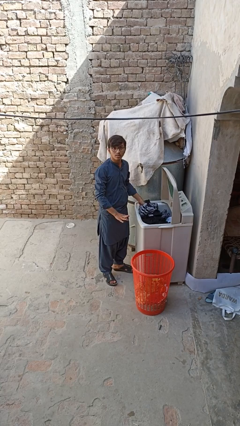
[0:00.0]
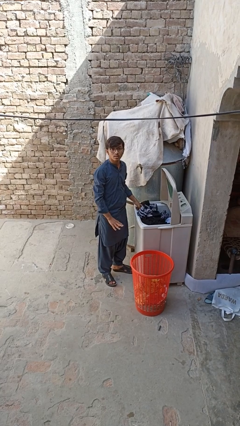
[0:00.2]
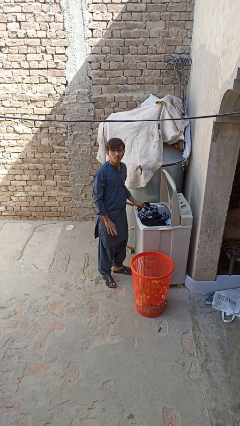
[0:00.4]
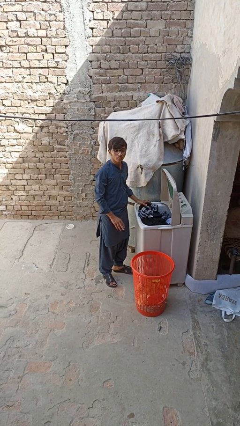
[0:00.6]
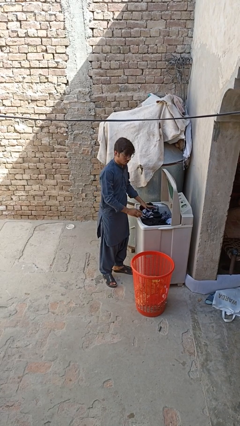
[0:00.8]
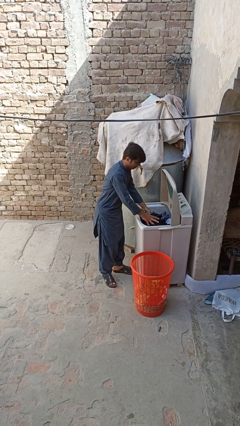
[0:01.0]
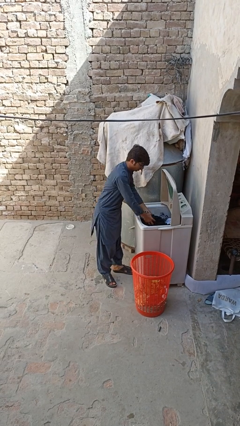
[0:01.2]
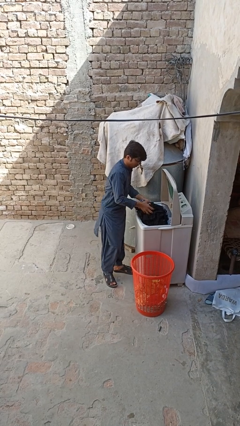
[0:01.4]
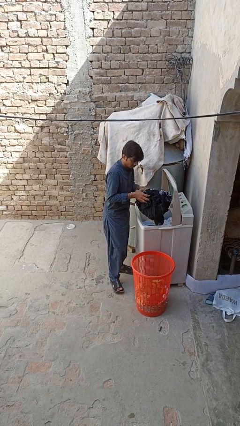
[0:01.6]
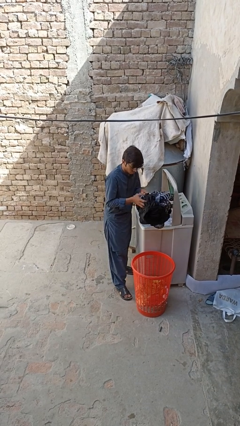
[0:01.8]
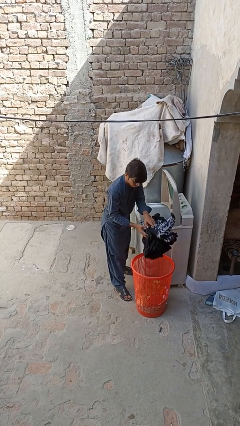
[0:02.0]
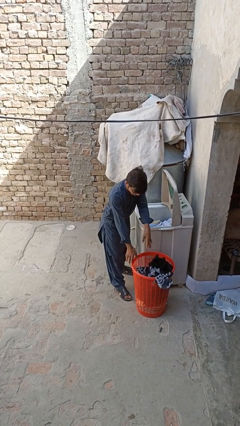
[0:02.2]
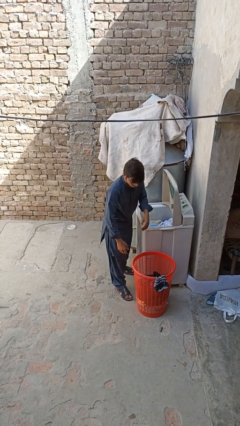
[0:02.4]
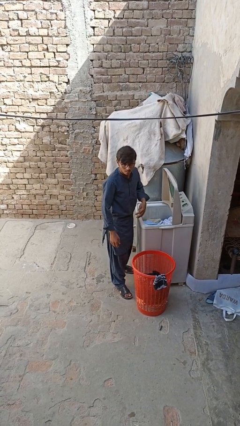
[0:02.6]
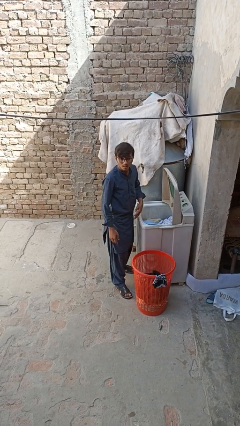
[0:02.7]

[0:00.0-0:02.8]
person unloads clotheswasher

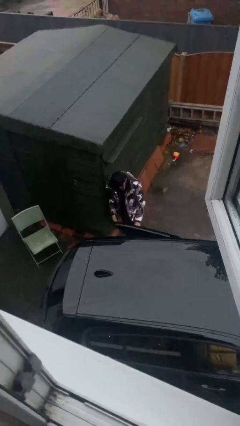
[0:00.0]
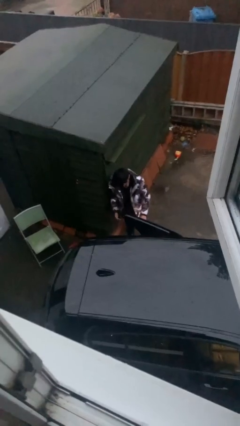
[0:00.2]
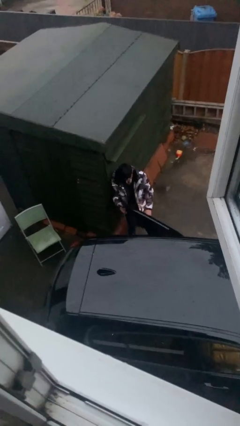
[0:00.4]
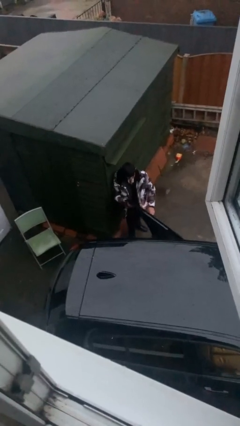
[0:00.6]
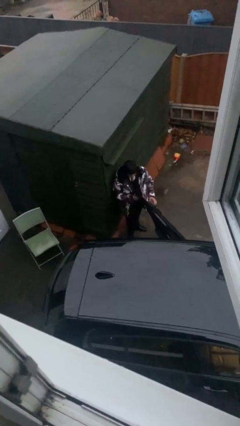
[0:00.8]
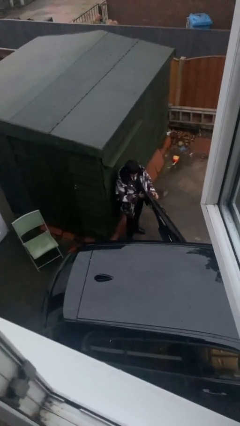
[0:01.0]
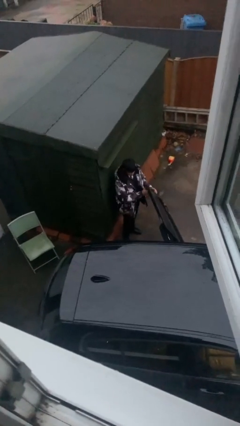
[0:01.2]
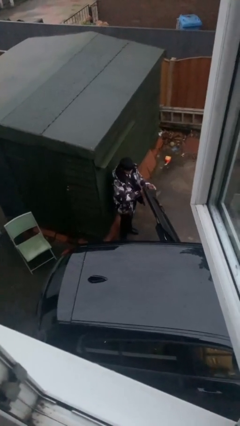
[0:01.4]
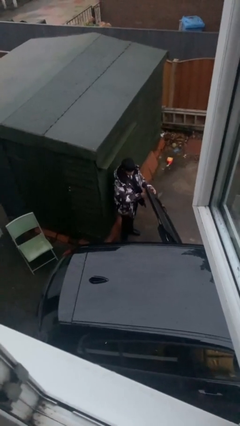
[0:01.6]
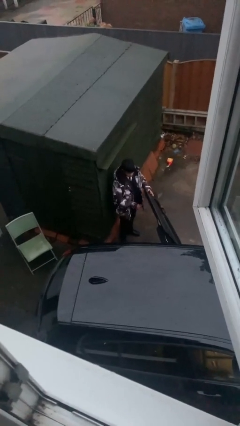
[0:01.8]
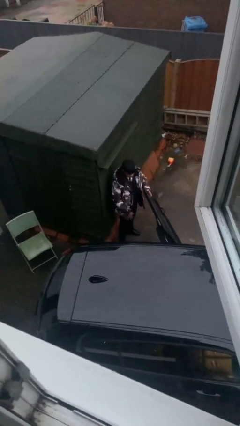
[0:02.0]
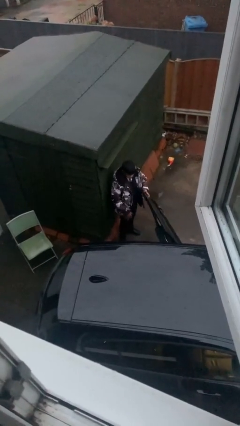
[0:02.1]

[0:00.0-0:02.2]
person opens car door

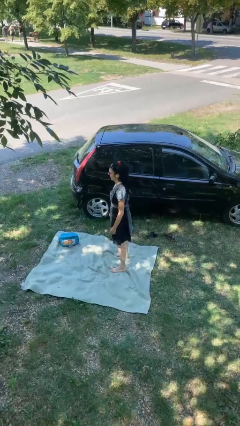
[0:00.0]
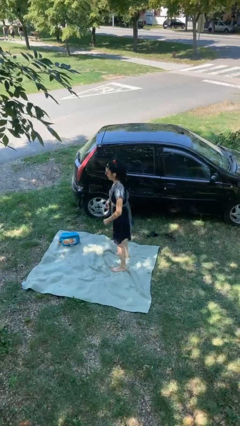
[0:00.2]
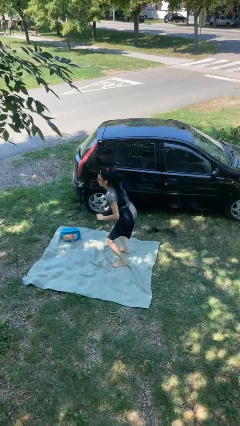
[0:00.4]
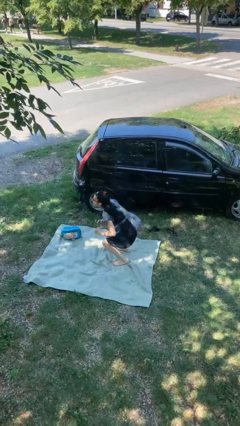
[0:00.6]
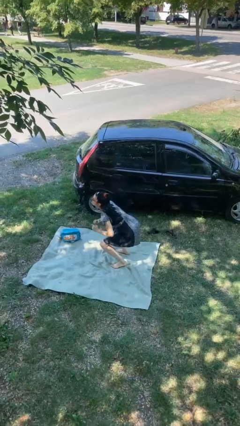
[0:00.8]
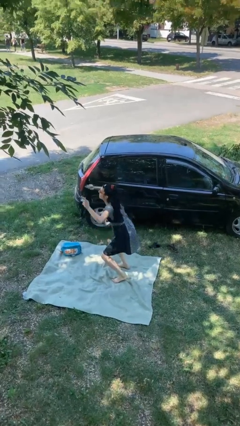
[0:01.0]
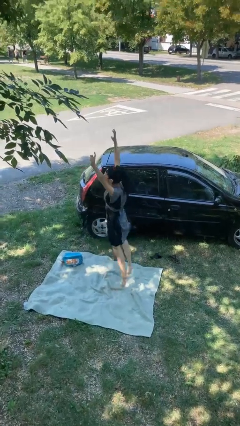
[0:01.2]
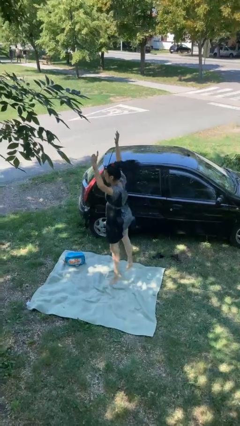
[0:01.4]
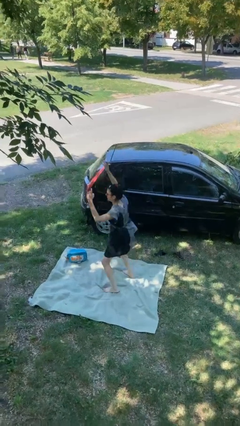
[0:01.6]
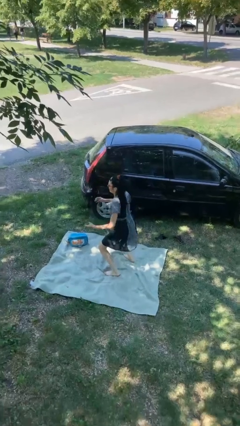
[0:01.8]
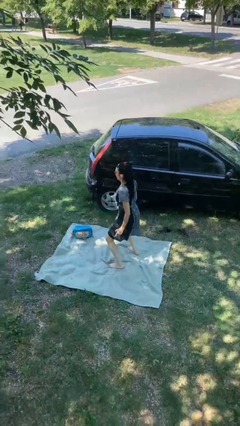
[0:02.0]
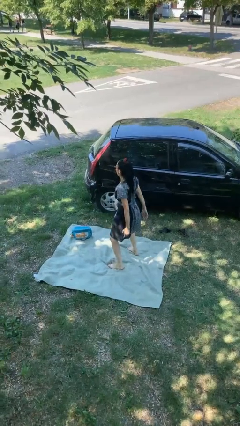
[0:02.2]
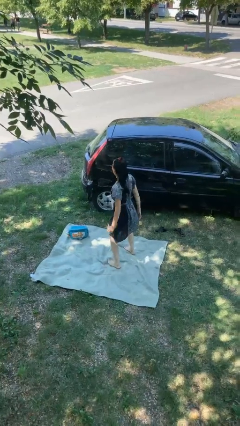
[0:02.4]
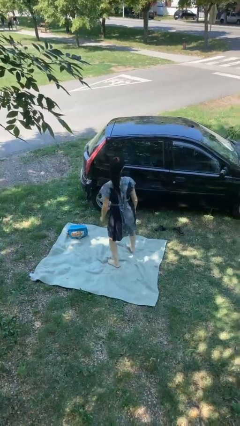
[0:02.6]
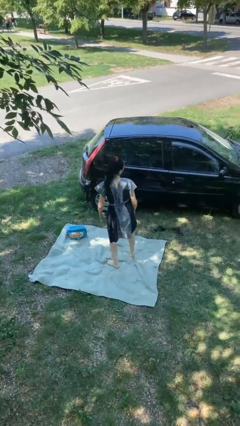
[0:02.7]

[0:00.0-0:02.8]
person jumps

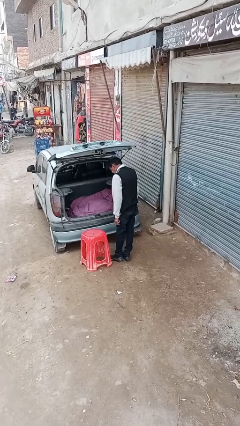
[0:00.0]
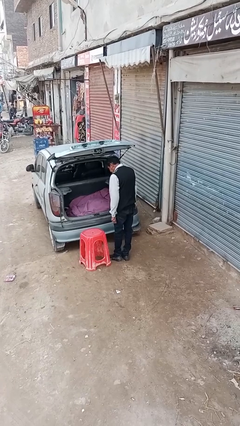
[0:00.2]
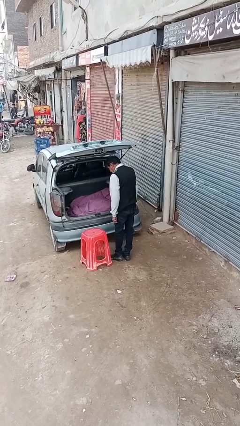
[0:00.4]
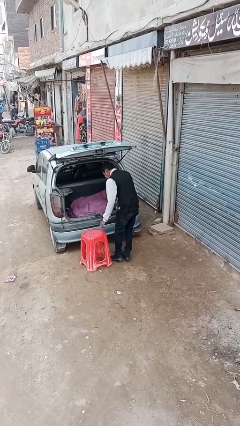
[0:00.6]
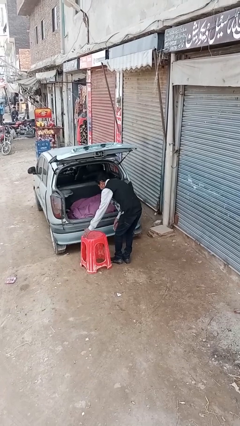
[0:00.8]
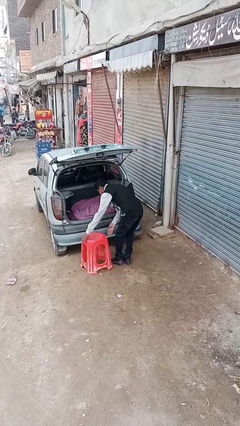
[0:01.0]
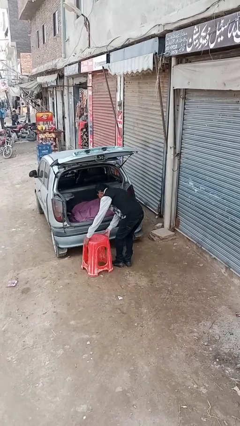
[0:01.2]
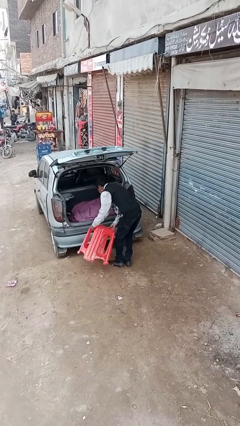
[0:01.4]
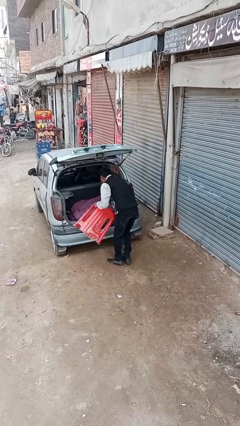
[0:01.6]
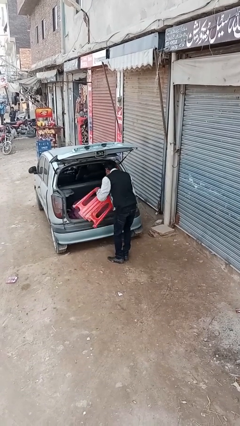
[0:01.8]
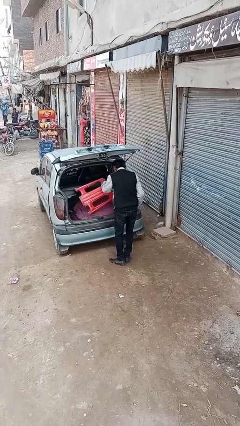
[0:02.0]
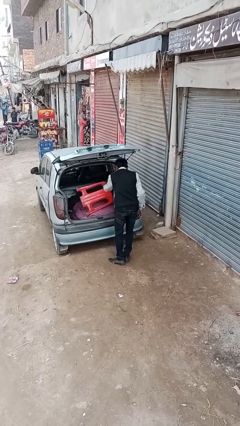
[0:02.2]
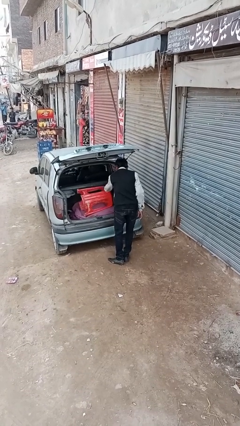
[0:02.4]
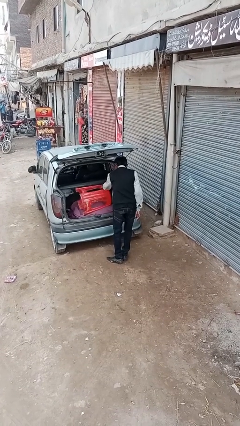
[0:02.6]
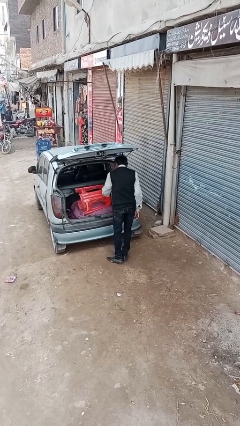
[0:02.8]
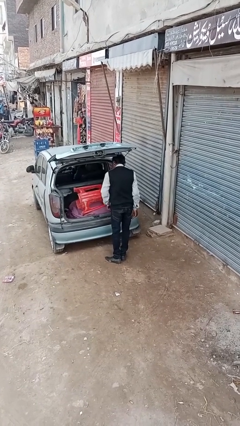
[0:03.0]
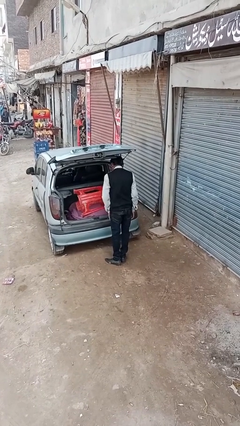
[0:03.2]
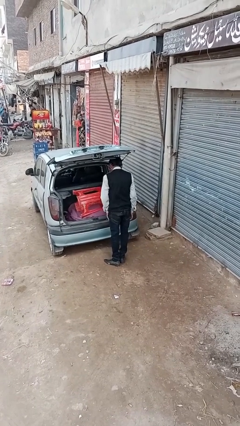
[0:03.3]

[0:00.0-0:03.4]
person loads car

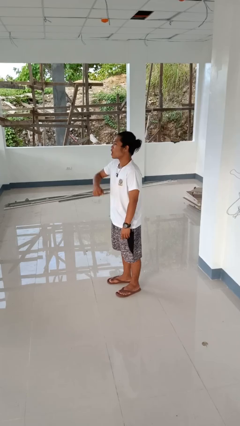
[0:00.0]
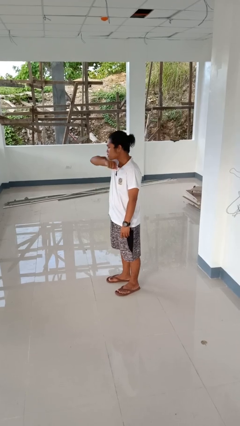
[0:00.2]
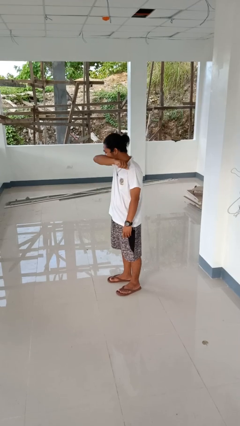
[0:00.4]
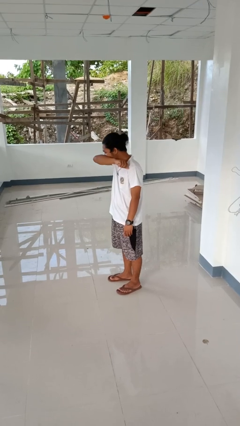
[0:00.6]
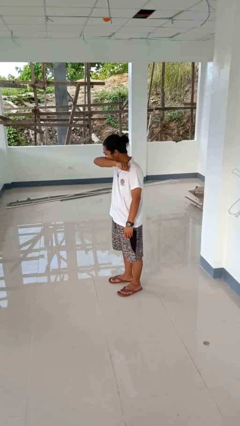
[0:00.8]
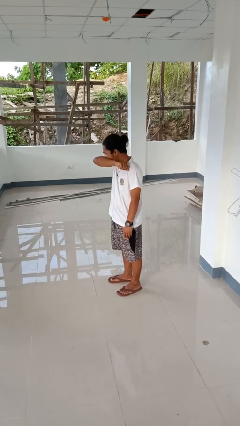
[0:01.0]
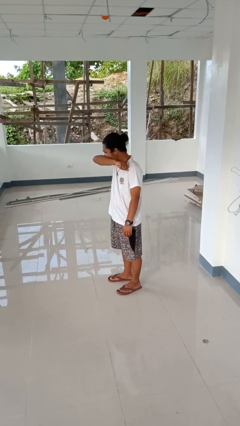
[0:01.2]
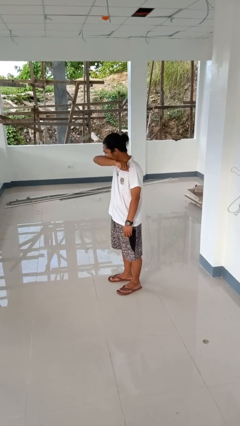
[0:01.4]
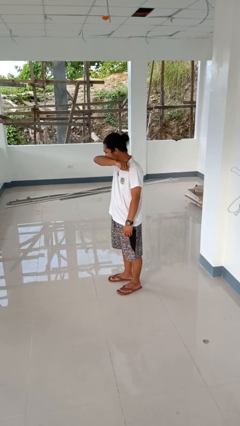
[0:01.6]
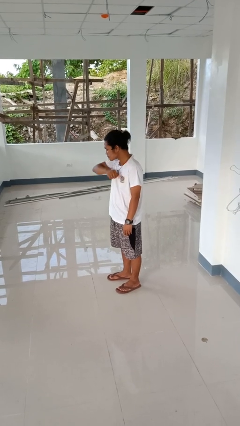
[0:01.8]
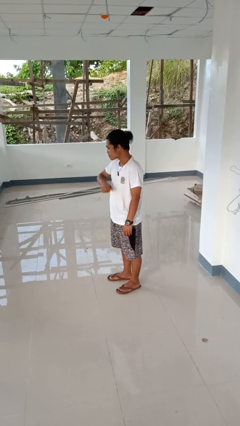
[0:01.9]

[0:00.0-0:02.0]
person sneezes into arm

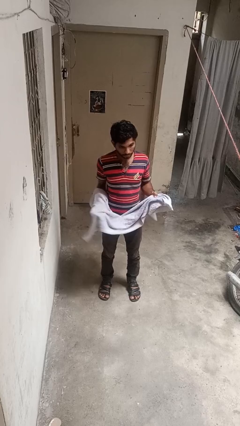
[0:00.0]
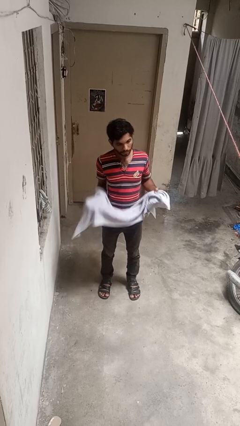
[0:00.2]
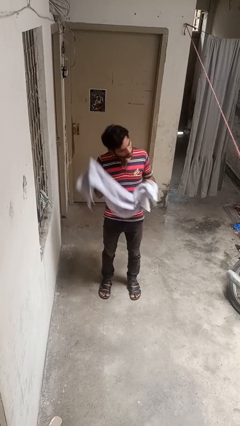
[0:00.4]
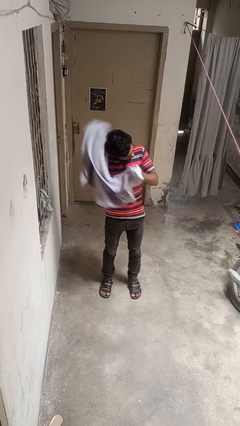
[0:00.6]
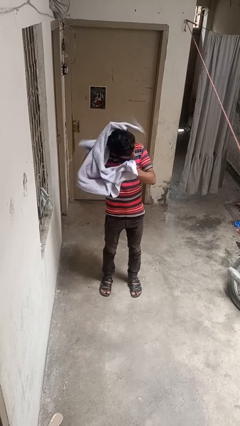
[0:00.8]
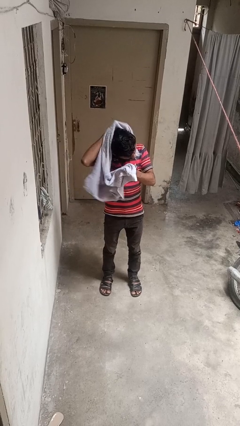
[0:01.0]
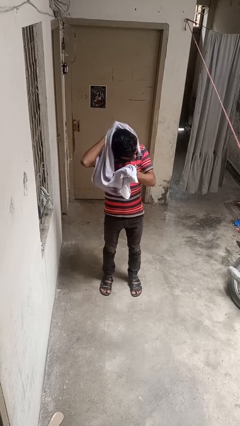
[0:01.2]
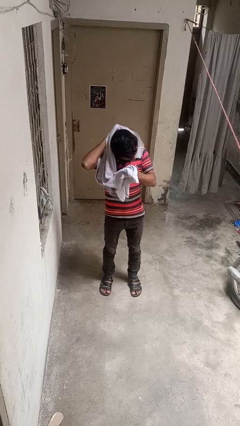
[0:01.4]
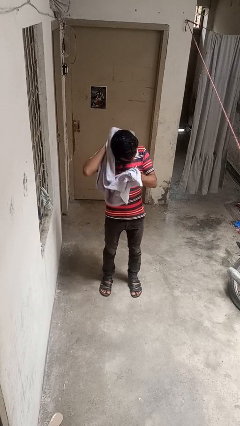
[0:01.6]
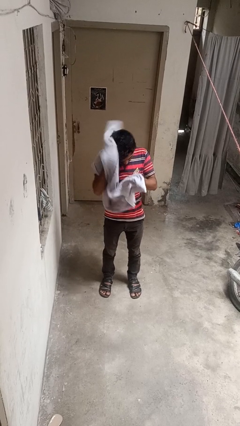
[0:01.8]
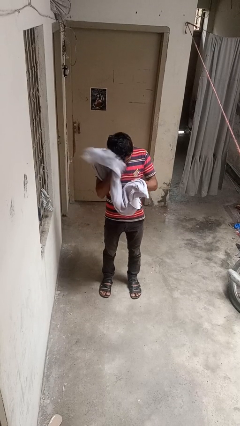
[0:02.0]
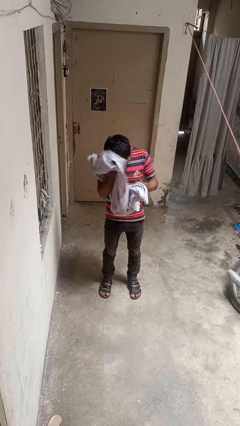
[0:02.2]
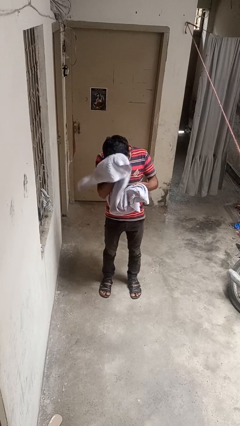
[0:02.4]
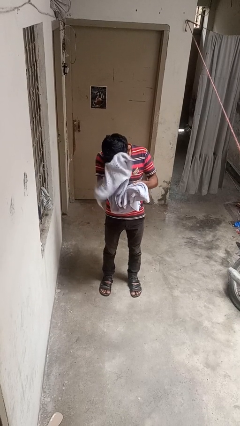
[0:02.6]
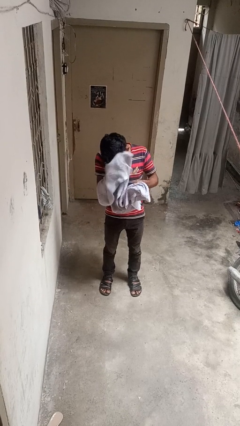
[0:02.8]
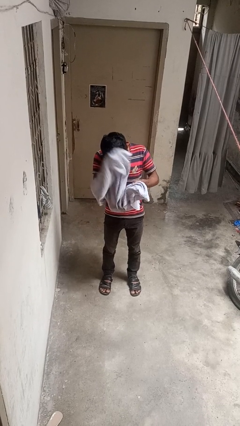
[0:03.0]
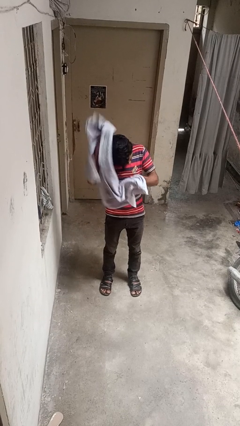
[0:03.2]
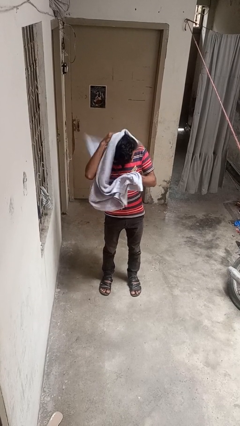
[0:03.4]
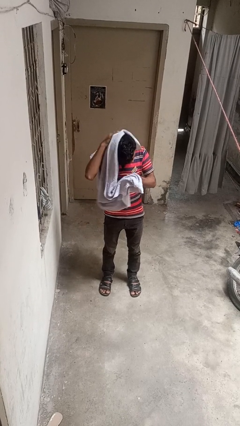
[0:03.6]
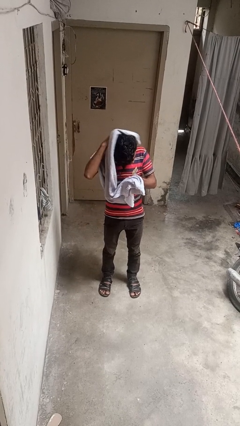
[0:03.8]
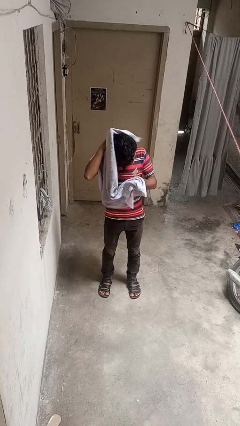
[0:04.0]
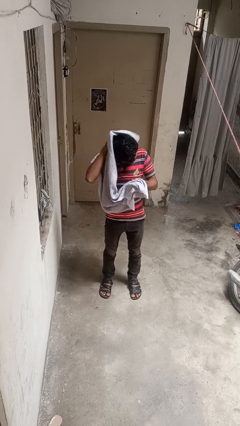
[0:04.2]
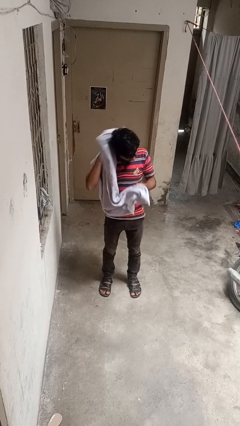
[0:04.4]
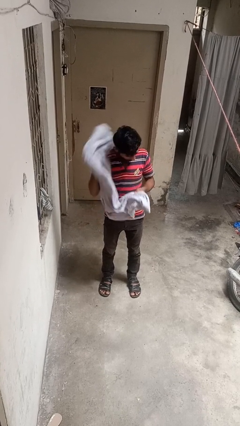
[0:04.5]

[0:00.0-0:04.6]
person dries hair with towel
